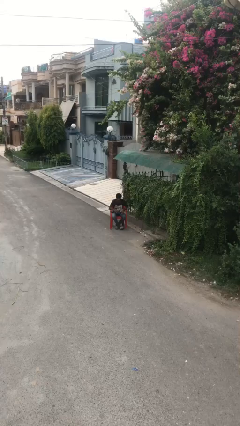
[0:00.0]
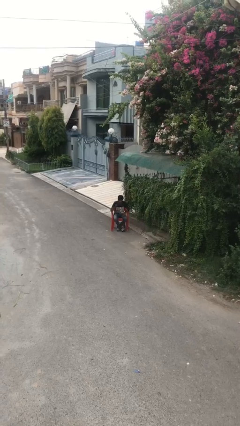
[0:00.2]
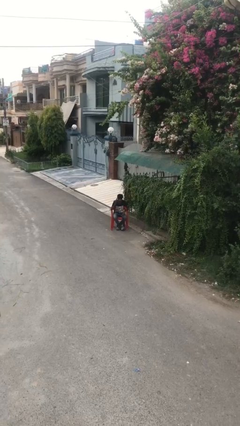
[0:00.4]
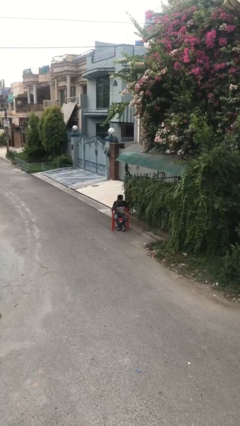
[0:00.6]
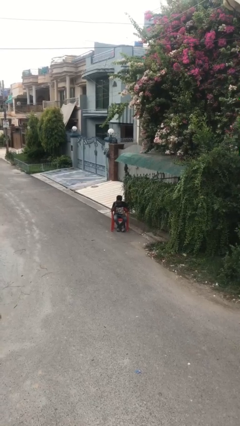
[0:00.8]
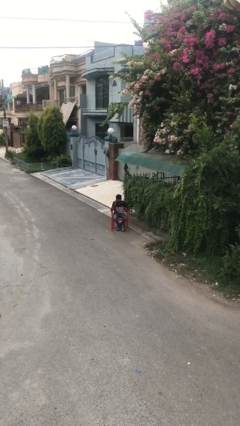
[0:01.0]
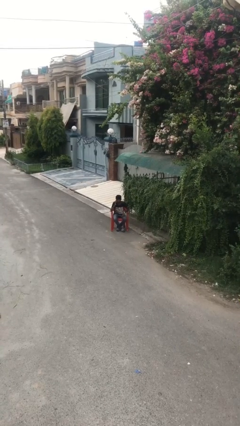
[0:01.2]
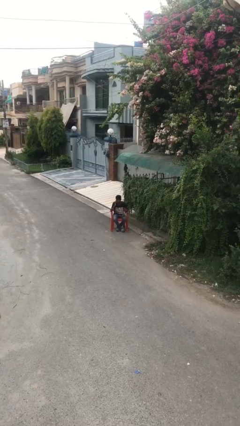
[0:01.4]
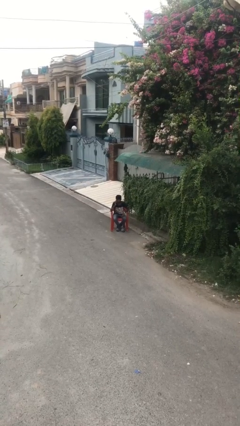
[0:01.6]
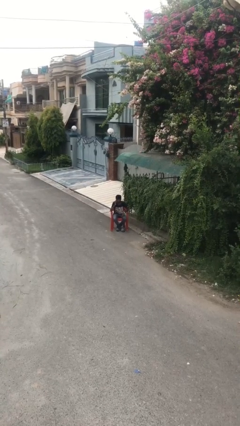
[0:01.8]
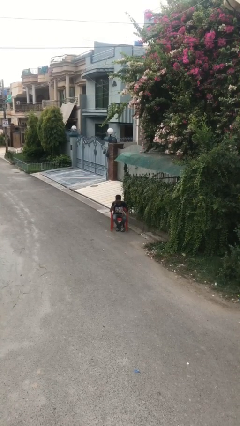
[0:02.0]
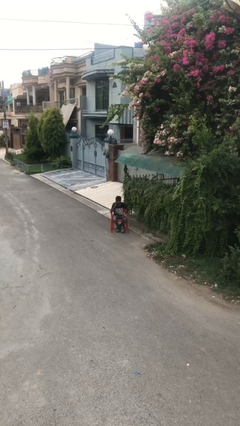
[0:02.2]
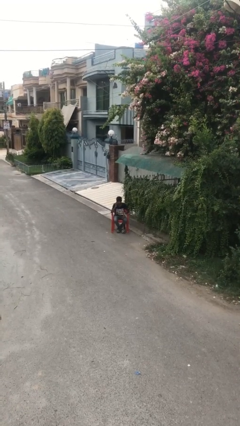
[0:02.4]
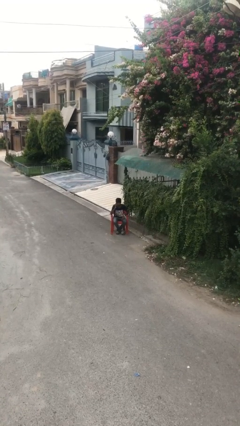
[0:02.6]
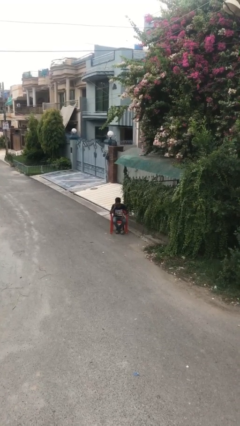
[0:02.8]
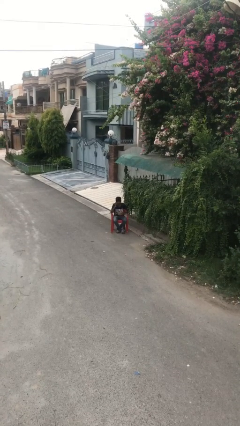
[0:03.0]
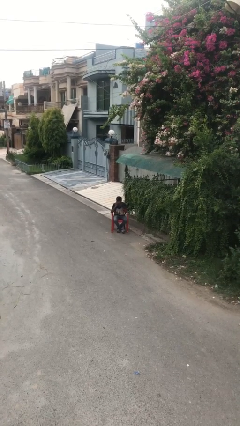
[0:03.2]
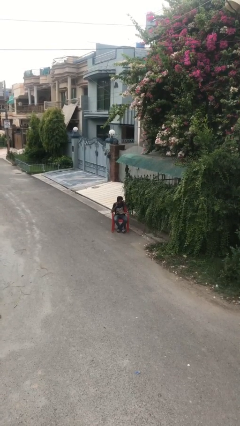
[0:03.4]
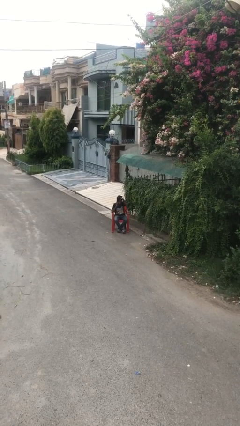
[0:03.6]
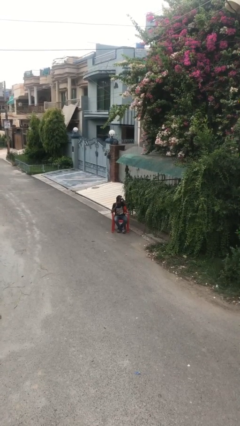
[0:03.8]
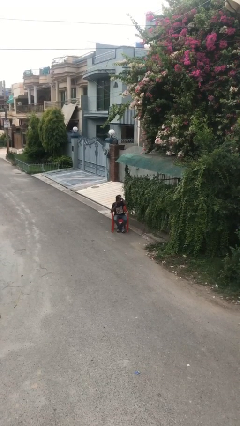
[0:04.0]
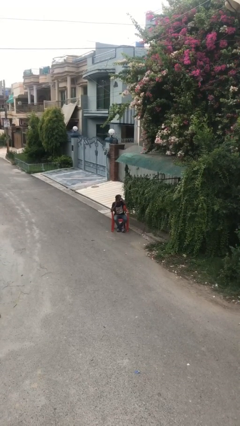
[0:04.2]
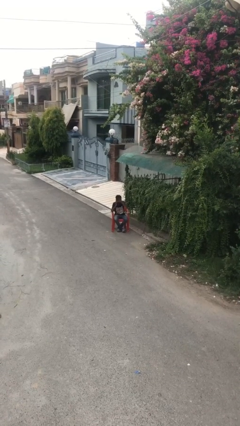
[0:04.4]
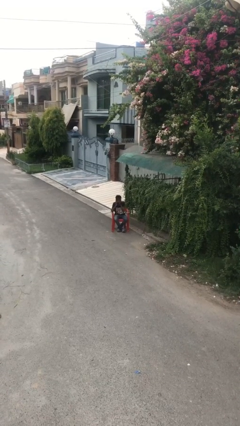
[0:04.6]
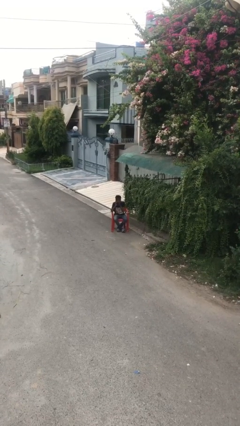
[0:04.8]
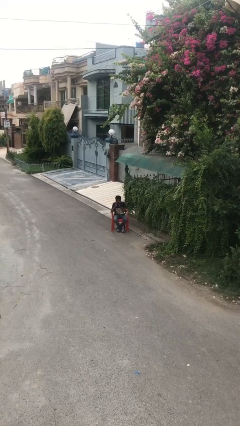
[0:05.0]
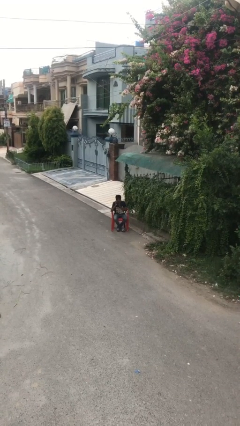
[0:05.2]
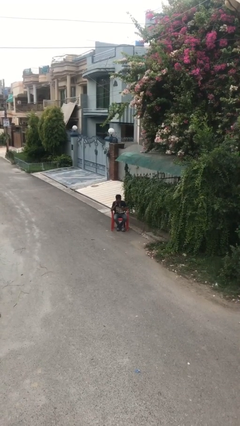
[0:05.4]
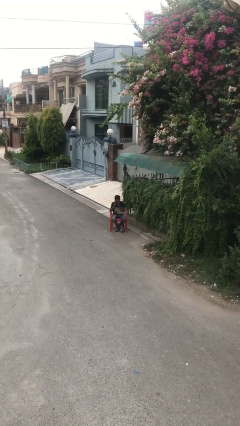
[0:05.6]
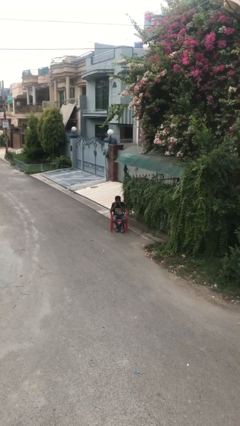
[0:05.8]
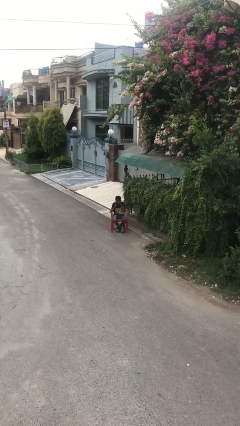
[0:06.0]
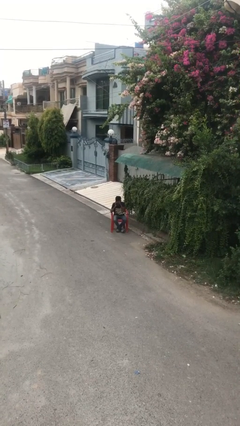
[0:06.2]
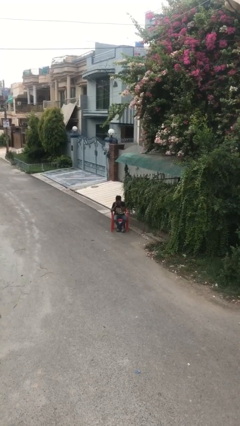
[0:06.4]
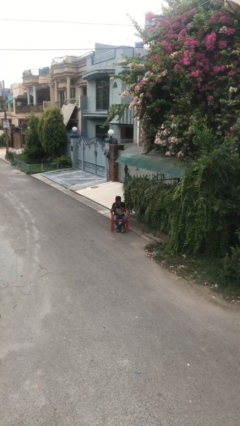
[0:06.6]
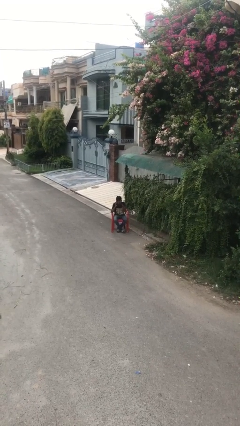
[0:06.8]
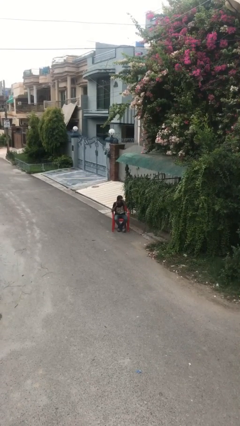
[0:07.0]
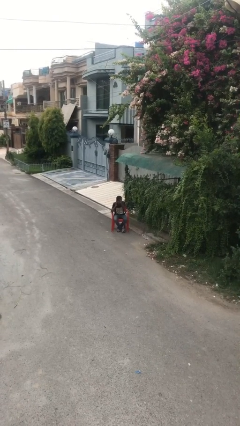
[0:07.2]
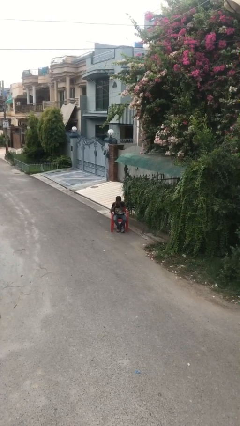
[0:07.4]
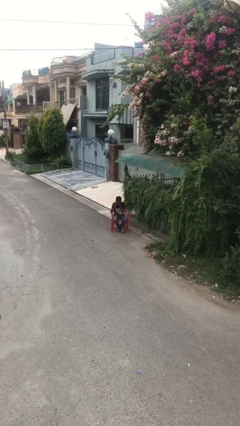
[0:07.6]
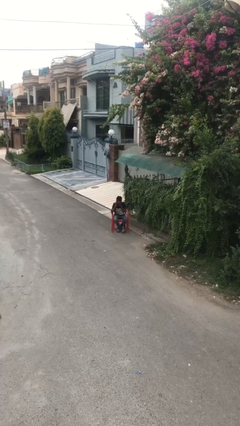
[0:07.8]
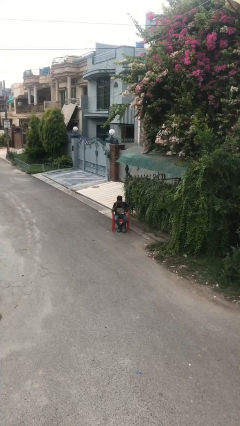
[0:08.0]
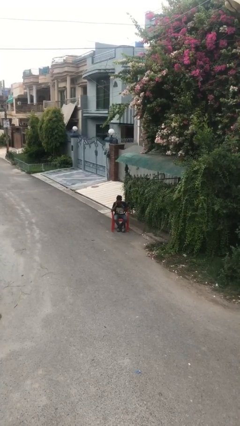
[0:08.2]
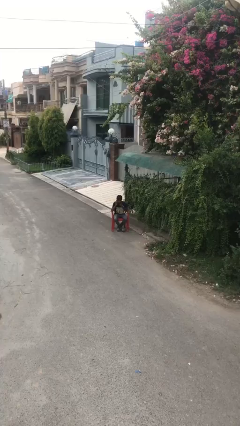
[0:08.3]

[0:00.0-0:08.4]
person talks on phone

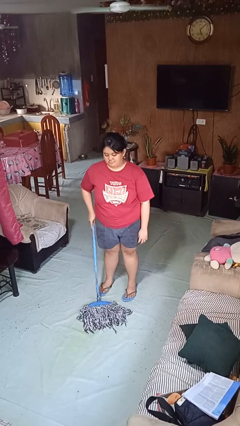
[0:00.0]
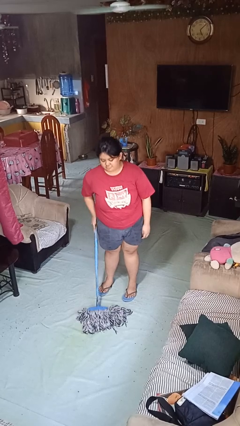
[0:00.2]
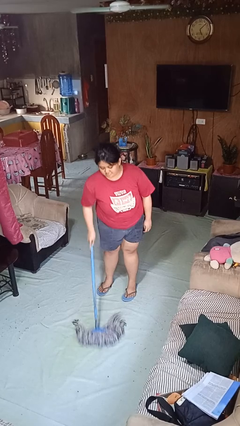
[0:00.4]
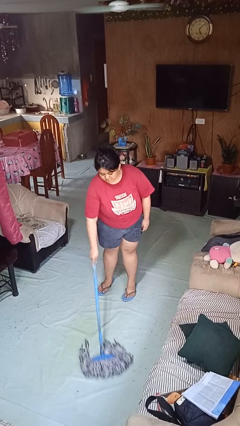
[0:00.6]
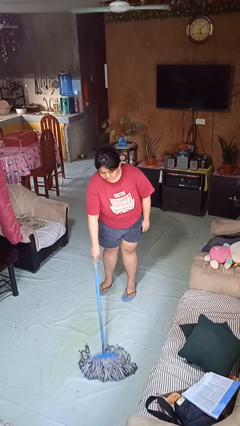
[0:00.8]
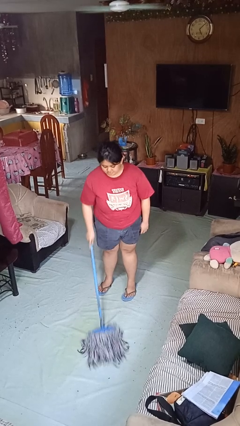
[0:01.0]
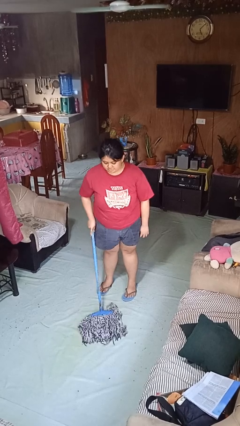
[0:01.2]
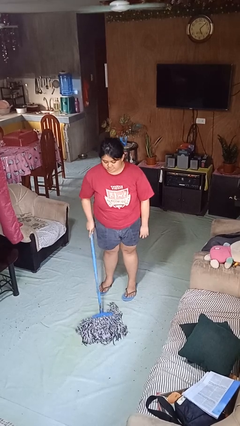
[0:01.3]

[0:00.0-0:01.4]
person mops

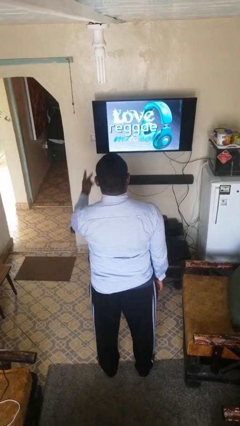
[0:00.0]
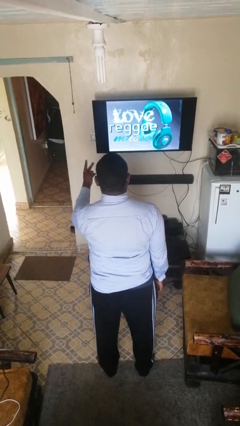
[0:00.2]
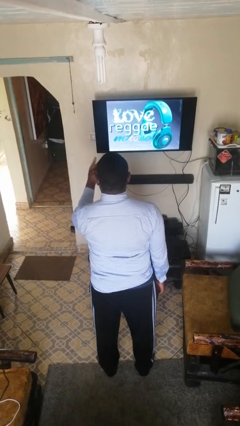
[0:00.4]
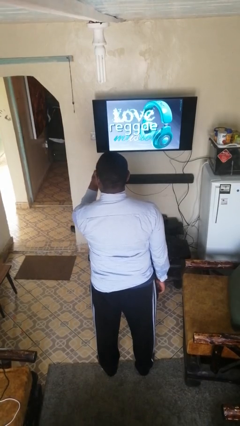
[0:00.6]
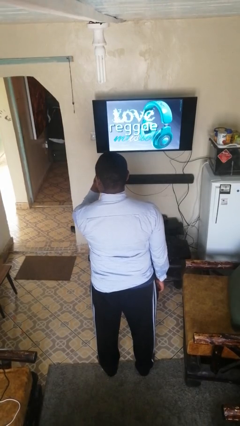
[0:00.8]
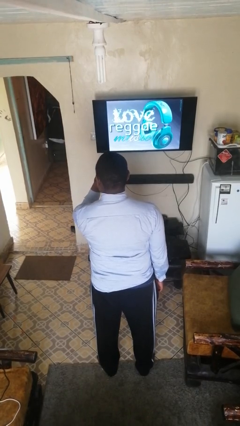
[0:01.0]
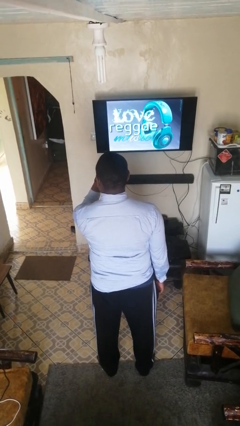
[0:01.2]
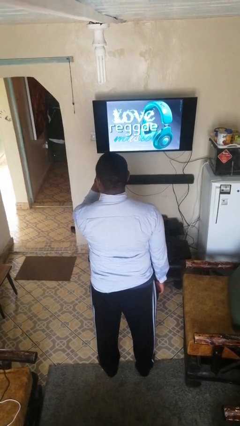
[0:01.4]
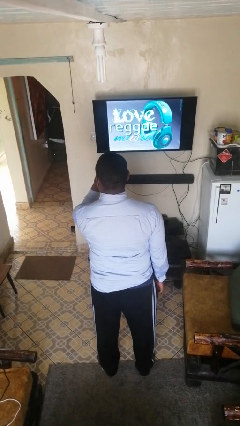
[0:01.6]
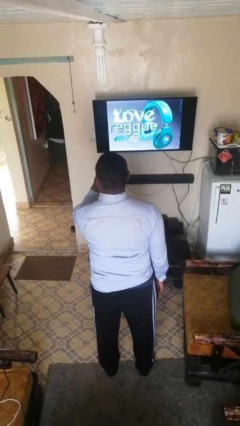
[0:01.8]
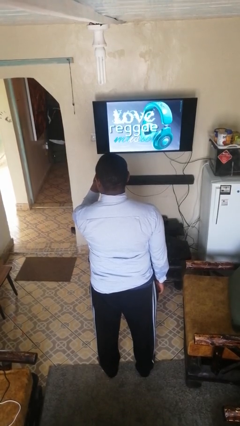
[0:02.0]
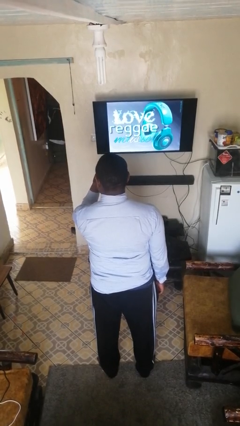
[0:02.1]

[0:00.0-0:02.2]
person gestures watch closely

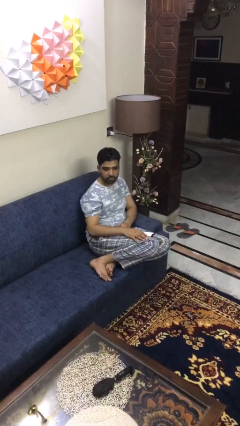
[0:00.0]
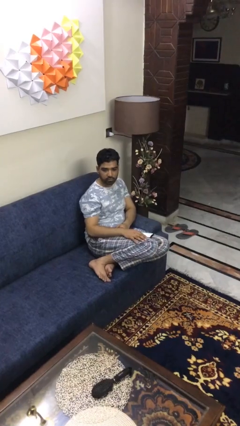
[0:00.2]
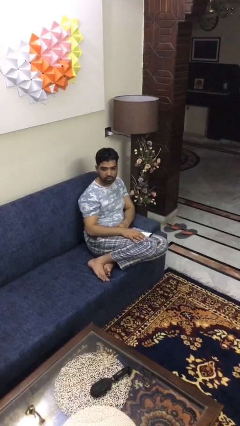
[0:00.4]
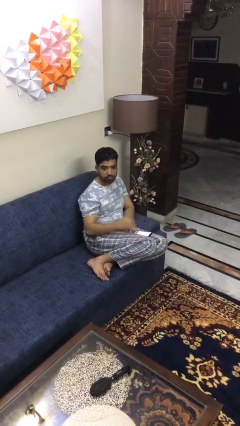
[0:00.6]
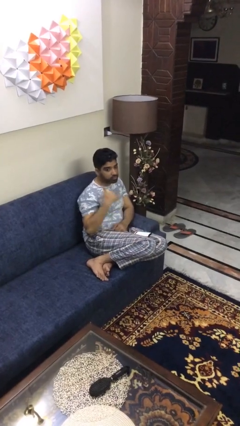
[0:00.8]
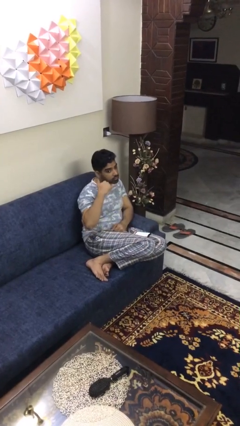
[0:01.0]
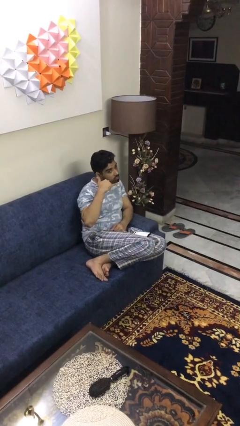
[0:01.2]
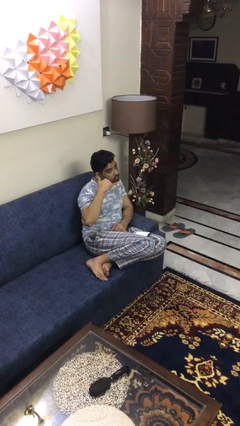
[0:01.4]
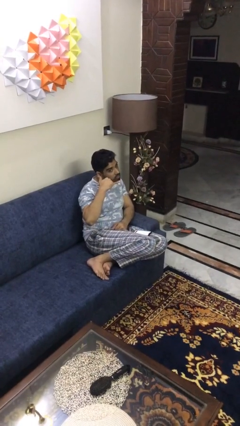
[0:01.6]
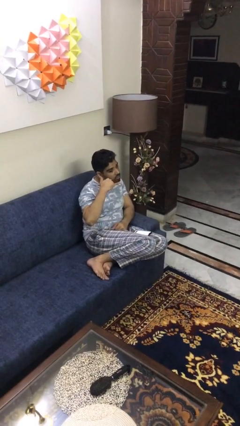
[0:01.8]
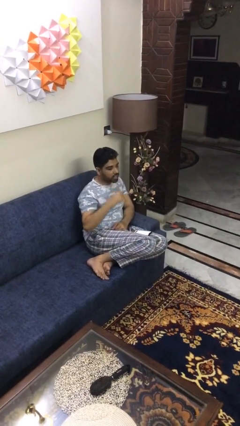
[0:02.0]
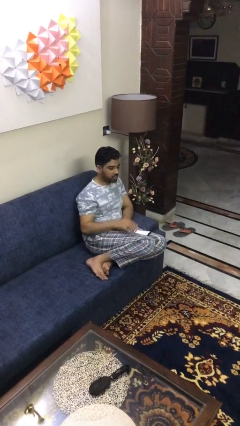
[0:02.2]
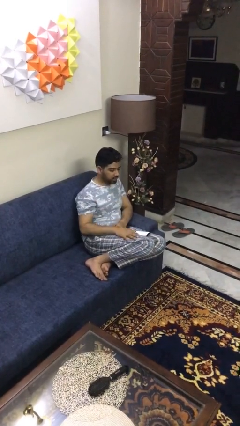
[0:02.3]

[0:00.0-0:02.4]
person gestures call me

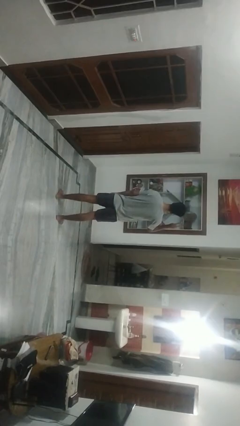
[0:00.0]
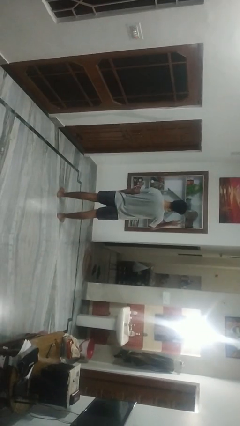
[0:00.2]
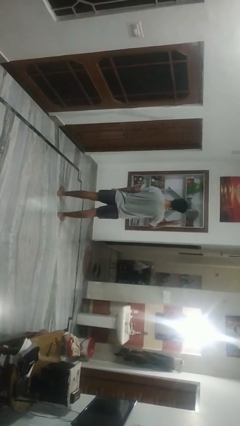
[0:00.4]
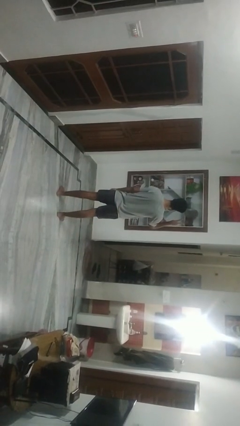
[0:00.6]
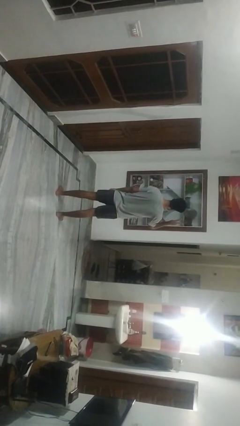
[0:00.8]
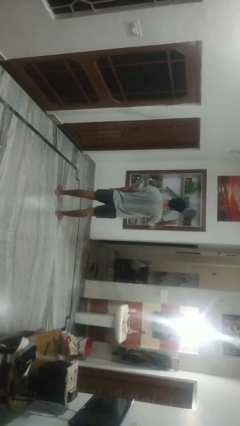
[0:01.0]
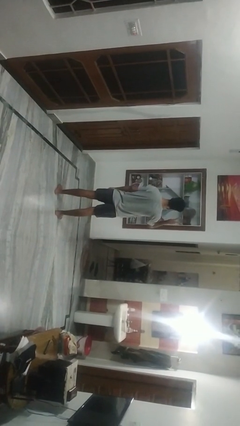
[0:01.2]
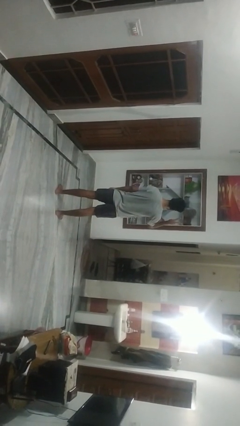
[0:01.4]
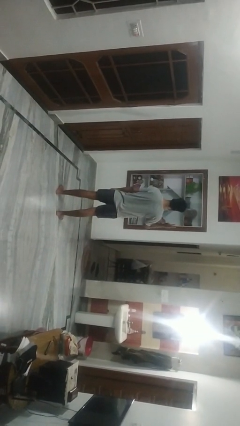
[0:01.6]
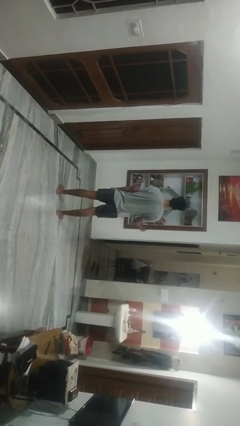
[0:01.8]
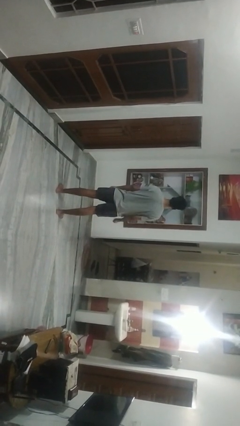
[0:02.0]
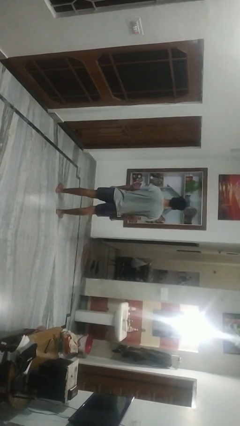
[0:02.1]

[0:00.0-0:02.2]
person gestures peace

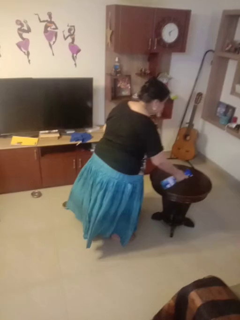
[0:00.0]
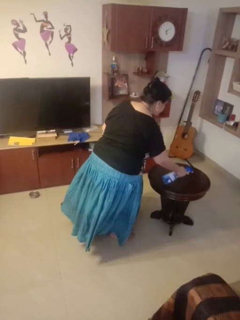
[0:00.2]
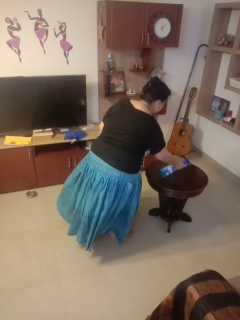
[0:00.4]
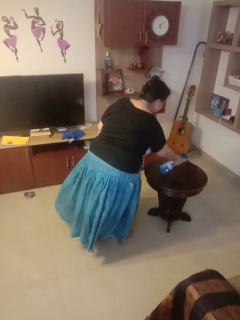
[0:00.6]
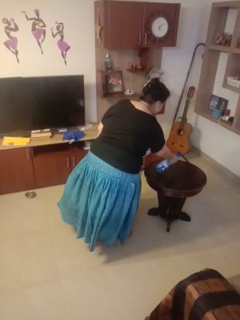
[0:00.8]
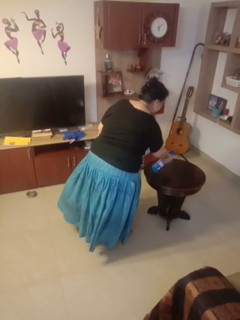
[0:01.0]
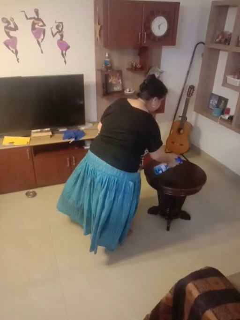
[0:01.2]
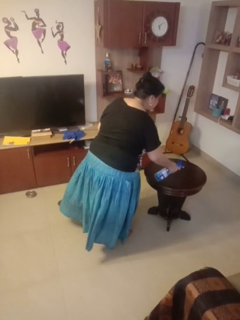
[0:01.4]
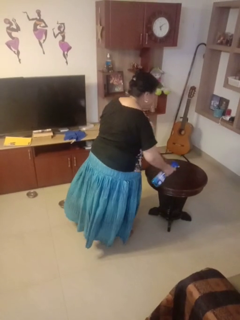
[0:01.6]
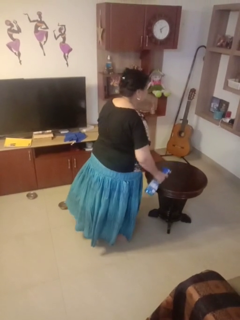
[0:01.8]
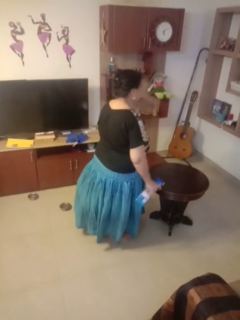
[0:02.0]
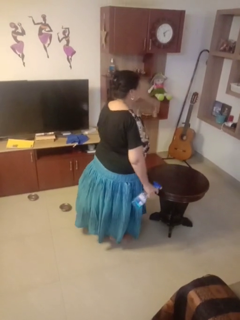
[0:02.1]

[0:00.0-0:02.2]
person sprays from bottle
